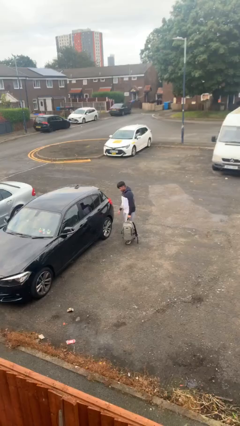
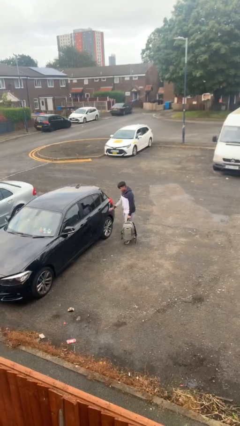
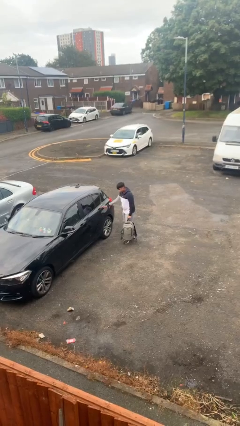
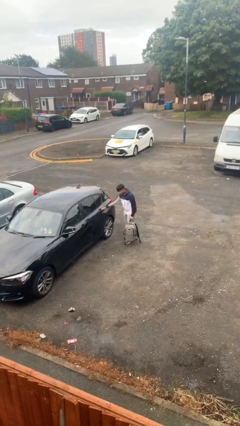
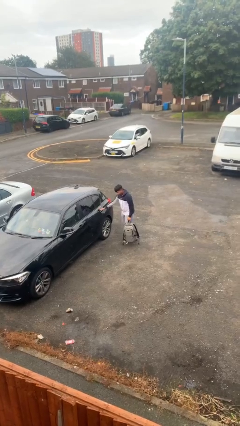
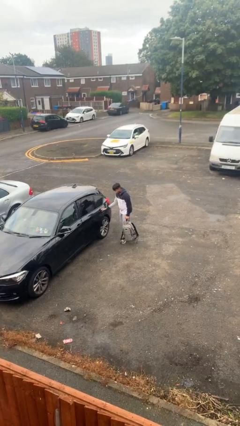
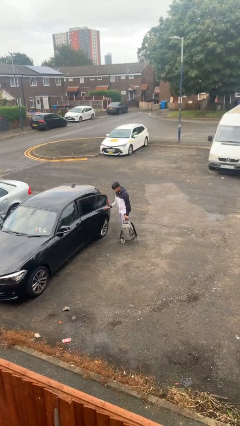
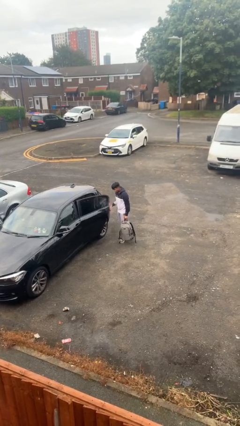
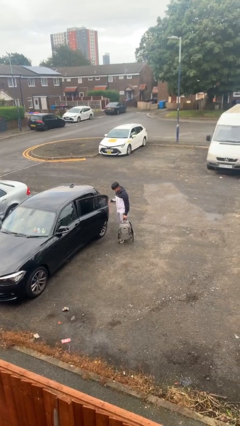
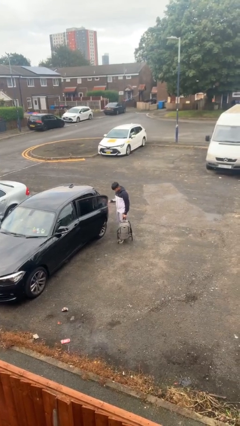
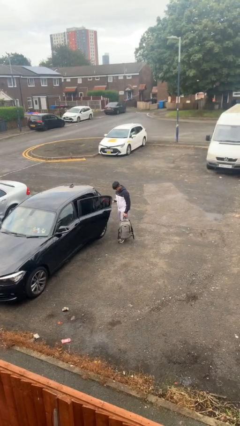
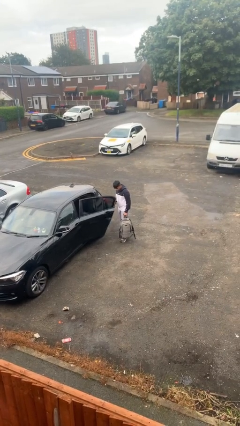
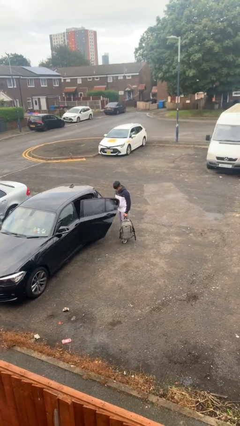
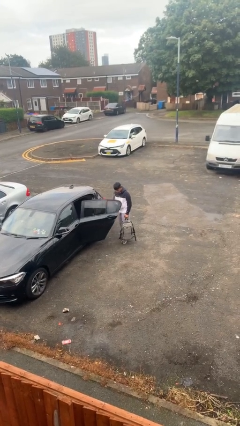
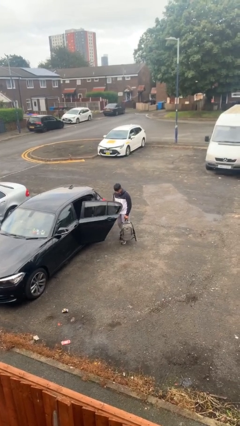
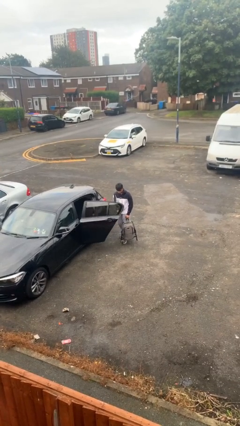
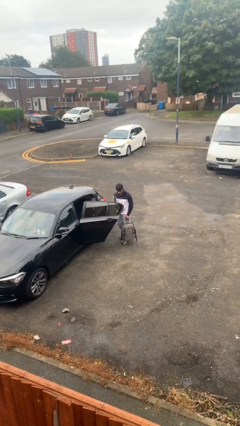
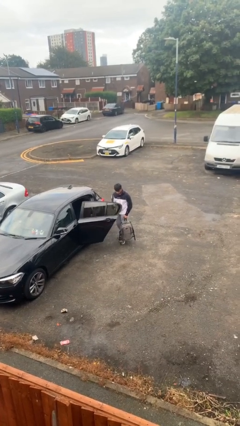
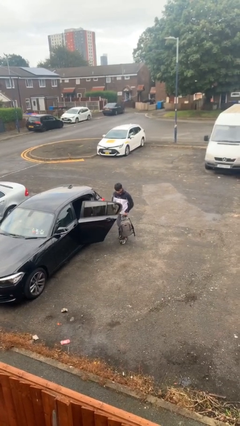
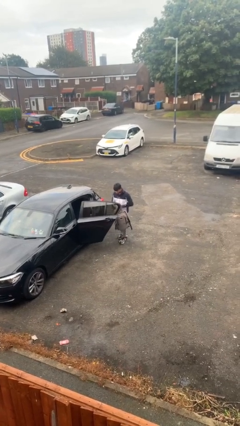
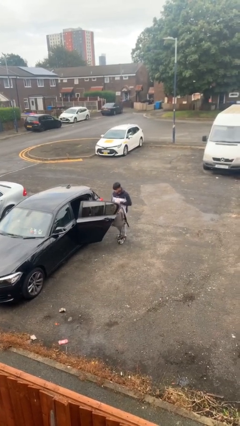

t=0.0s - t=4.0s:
person opens car door

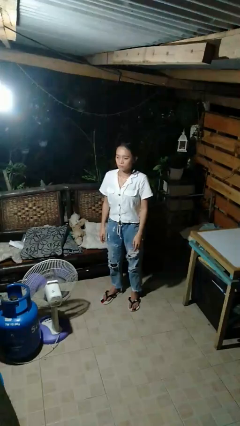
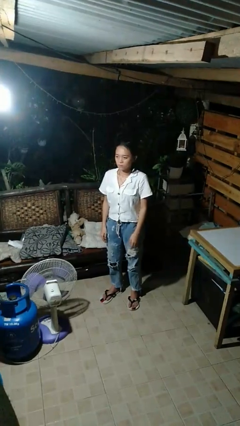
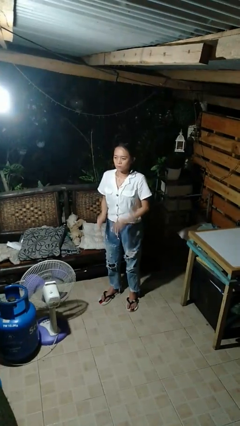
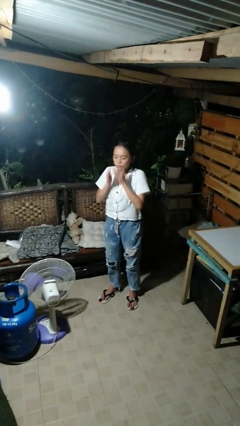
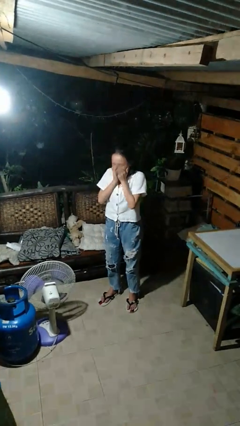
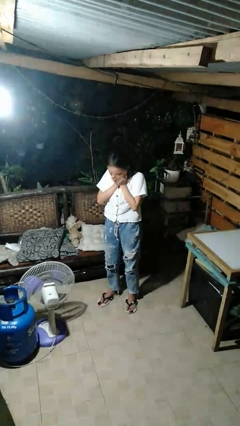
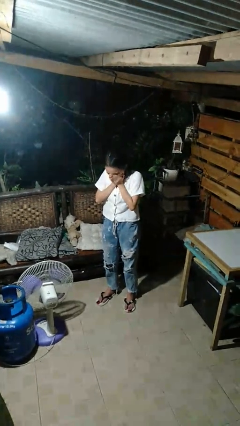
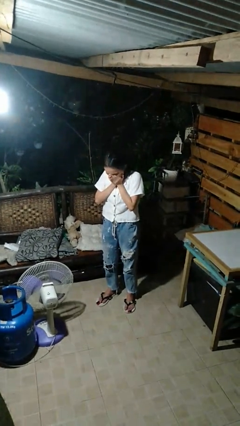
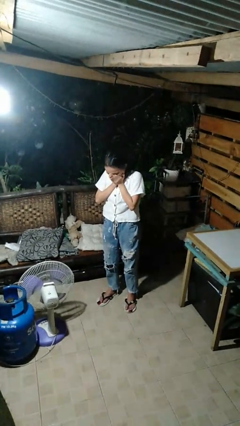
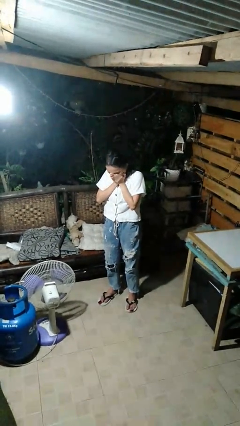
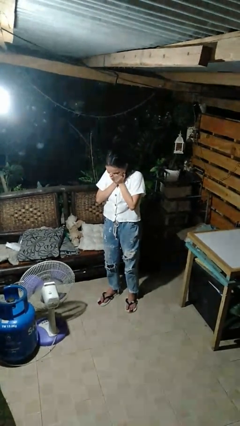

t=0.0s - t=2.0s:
person sneezes into hand

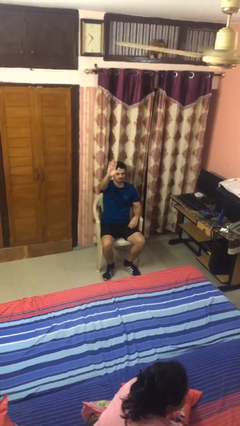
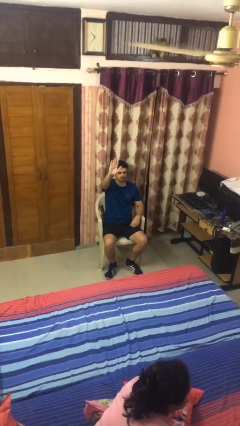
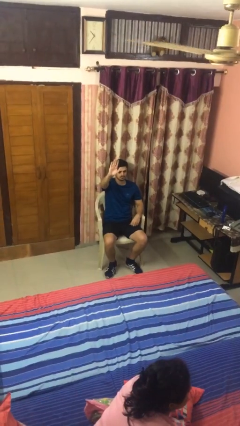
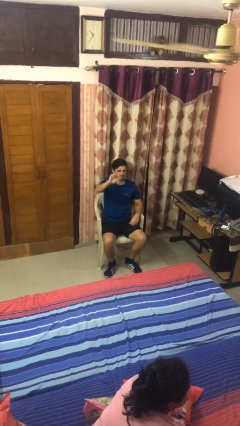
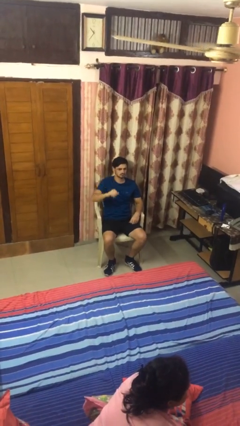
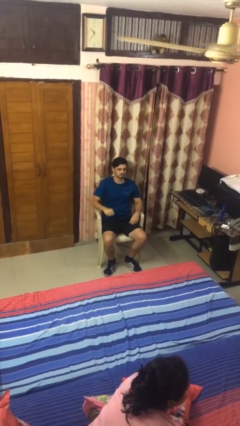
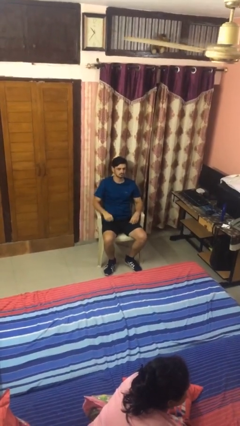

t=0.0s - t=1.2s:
person gestures lower hand

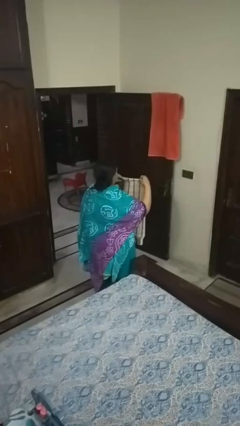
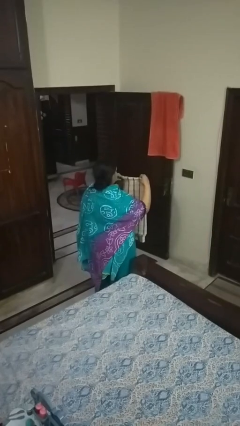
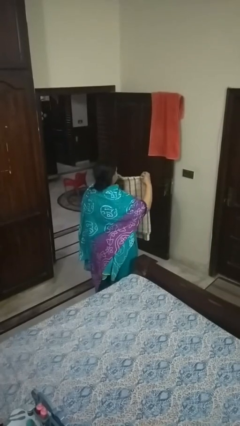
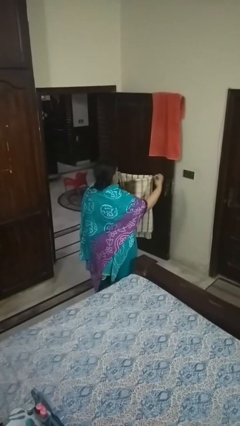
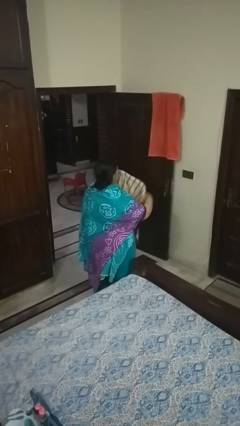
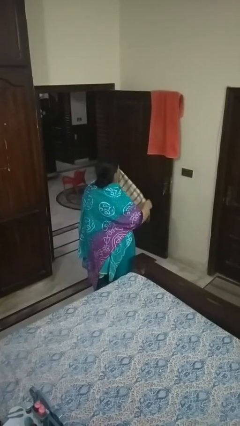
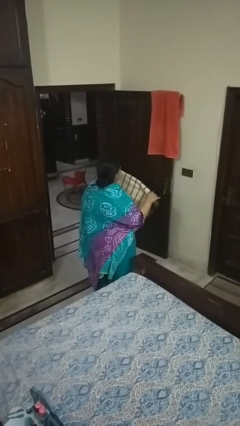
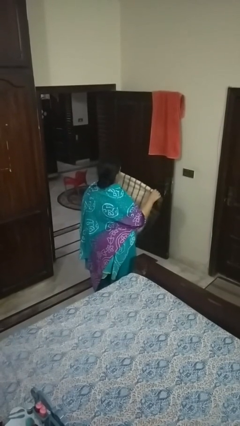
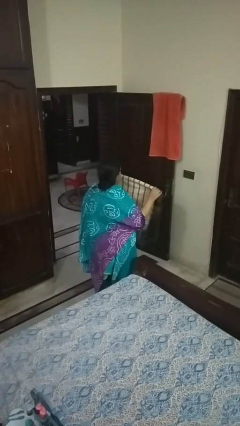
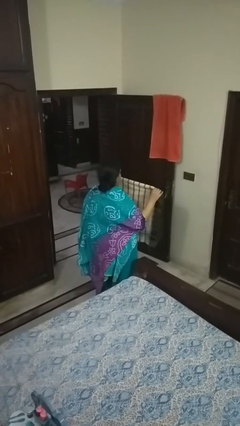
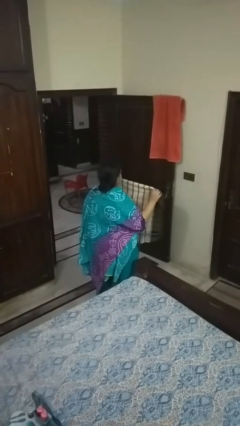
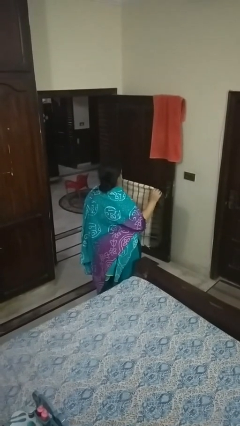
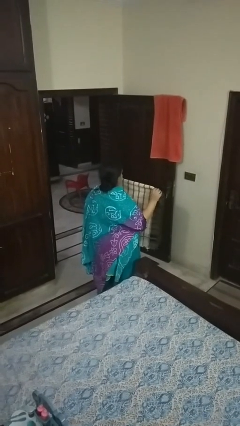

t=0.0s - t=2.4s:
person unfolds blanket

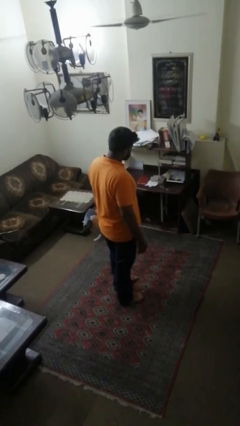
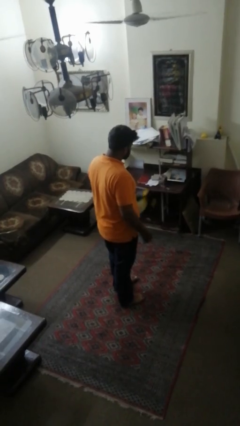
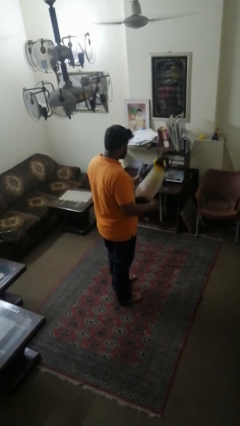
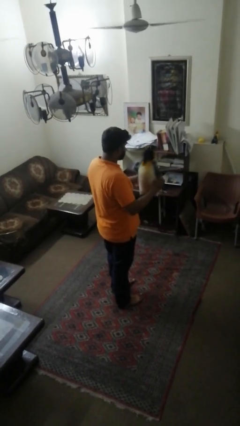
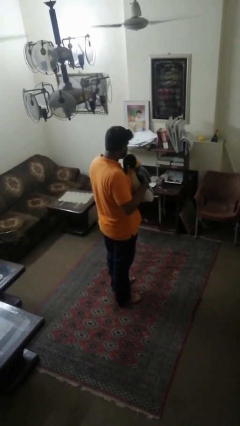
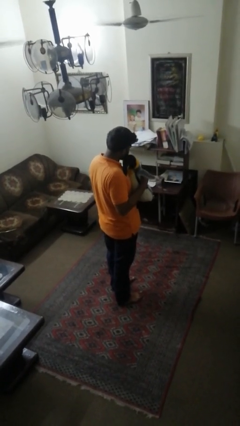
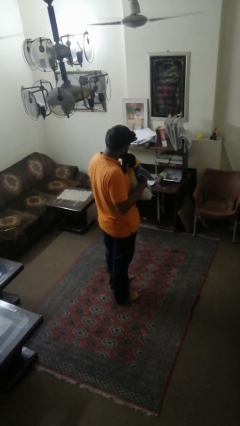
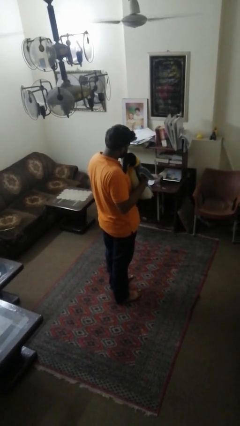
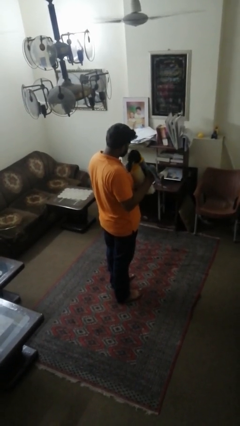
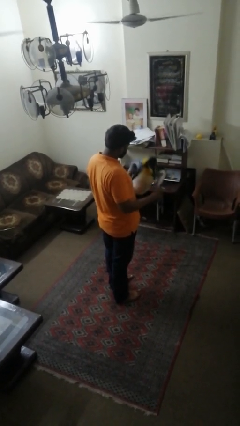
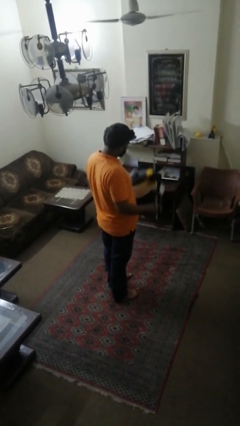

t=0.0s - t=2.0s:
person hugs stuffed animal

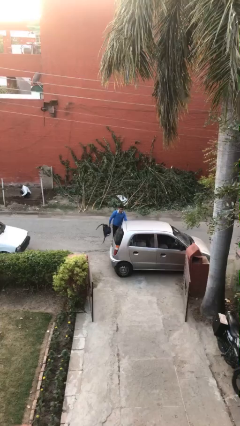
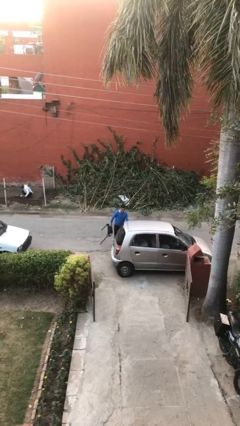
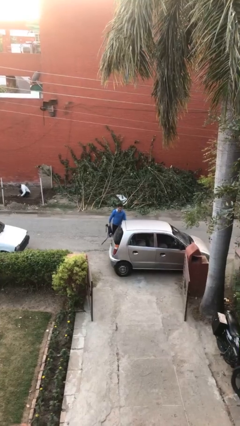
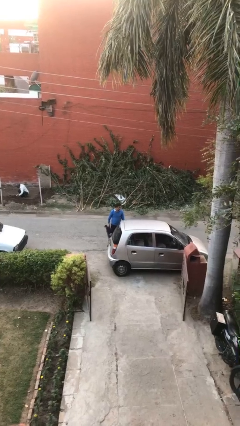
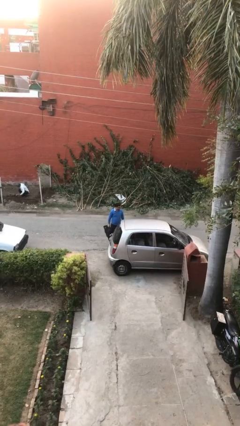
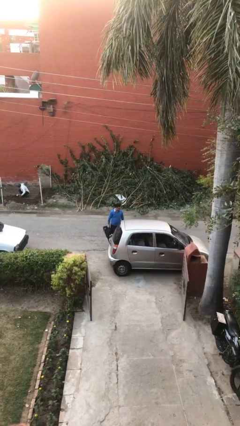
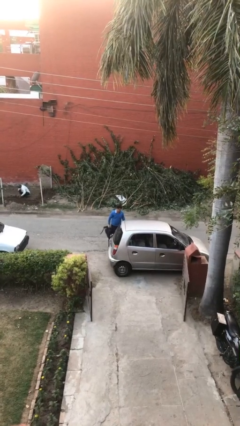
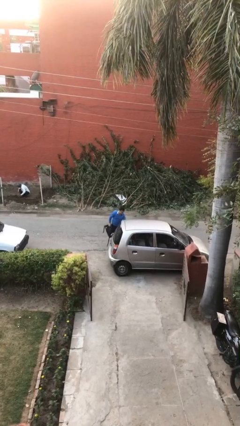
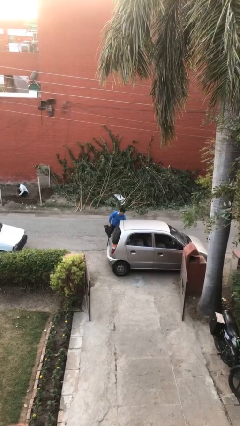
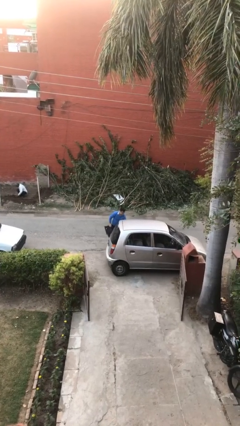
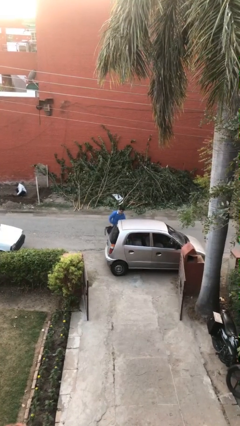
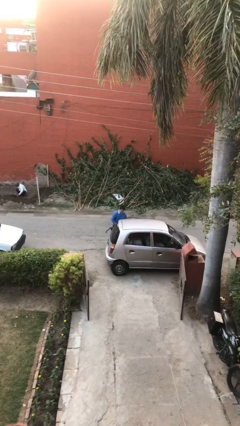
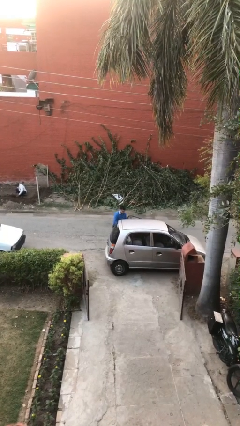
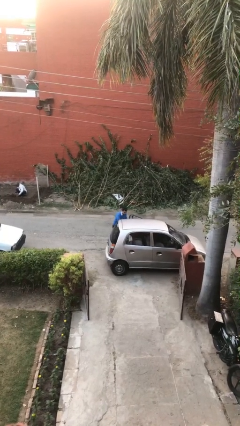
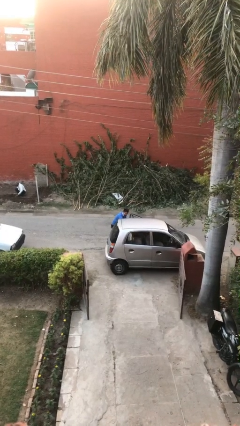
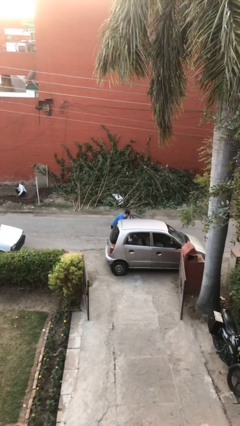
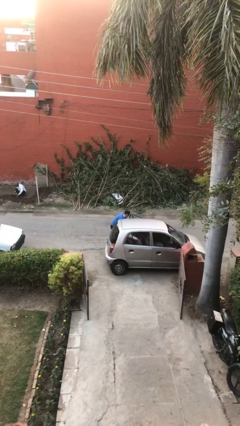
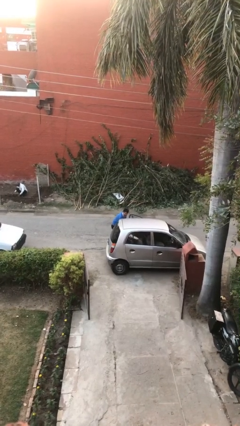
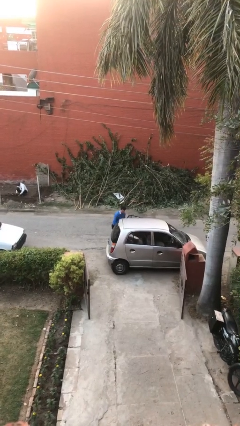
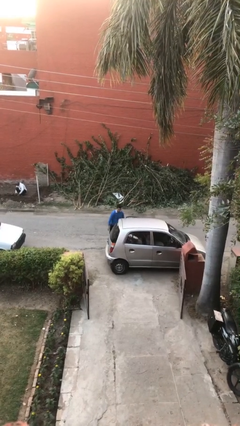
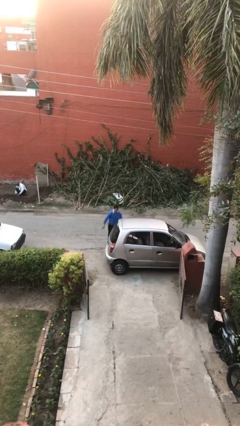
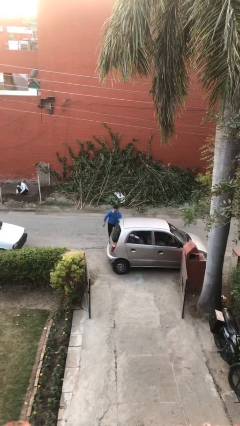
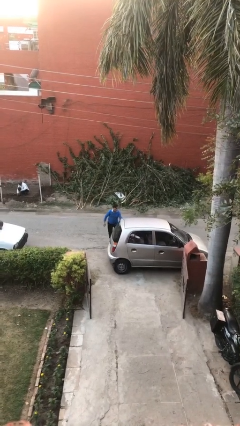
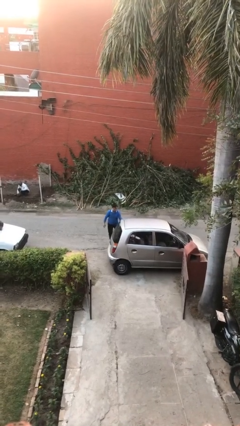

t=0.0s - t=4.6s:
person loads car

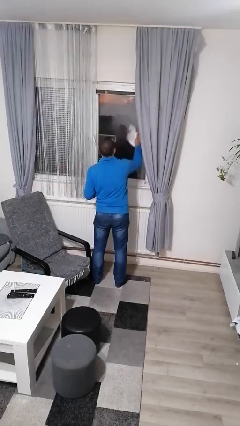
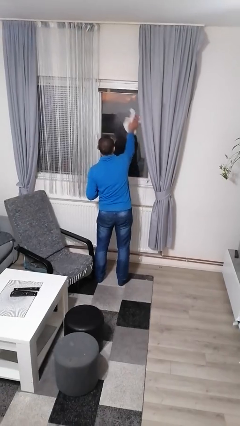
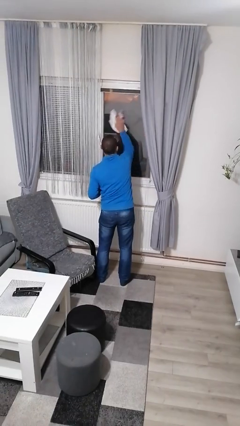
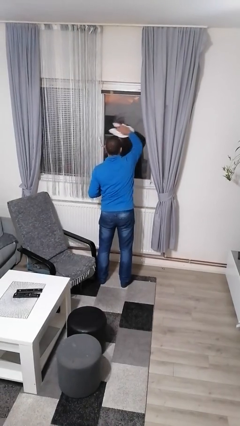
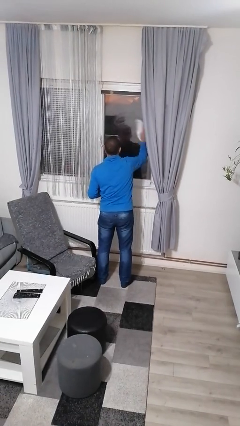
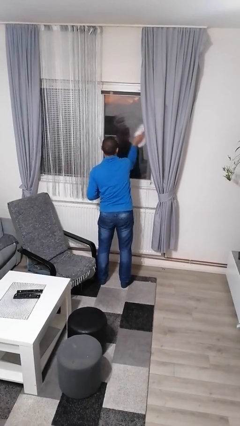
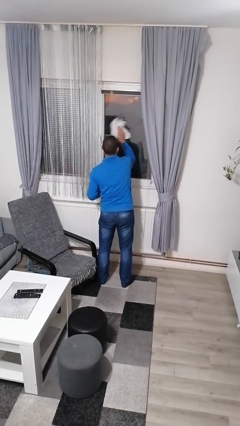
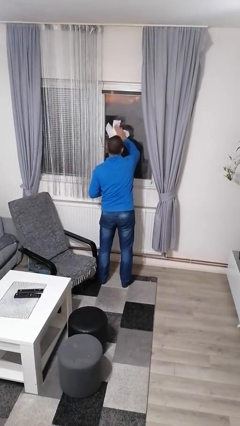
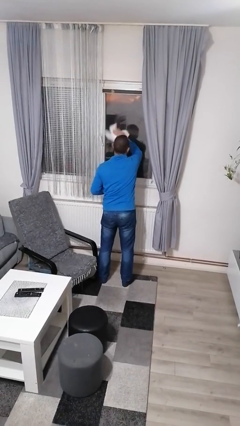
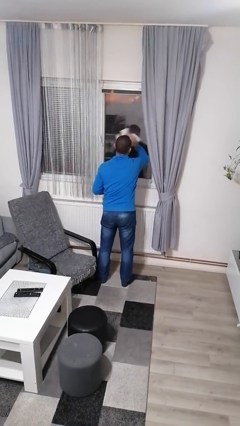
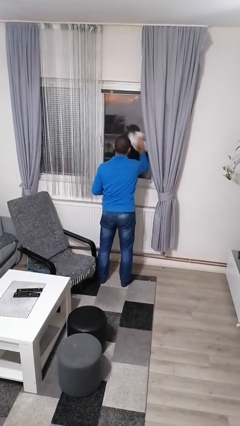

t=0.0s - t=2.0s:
person washes window
